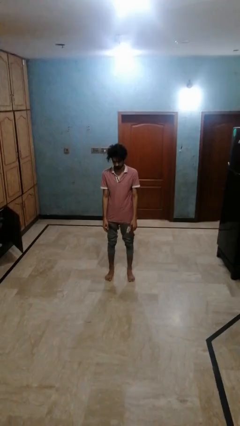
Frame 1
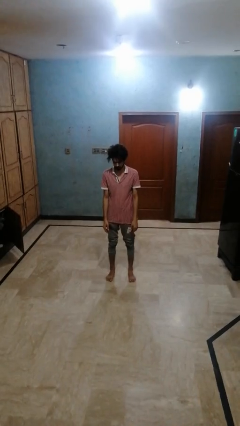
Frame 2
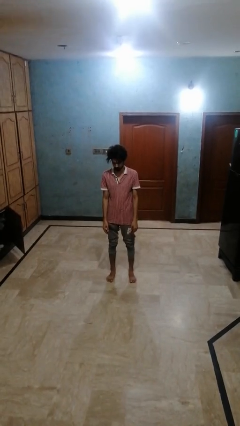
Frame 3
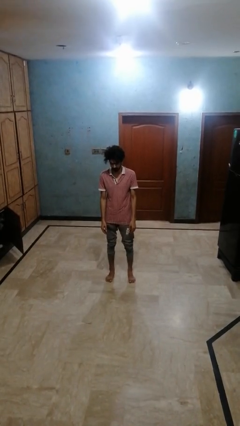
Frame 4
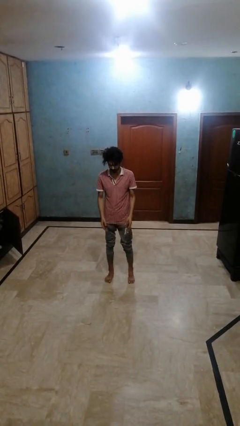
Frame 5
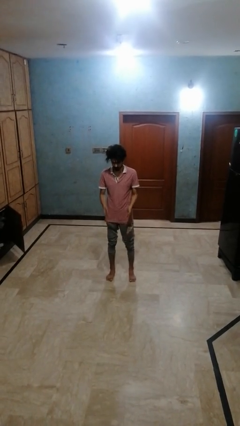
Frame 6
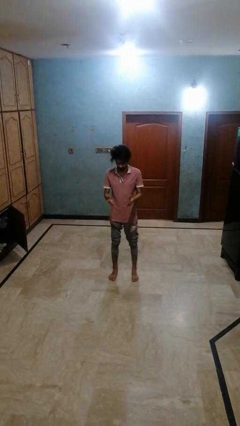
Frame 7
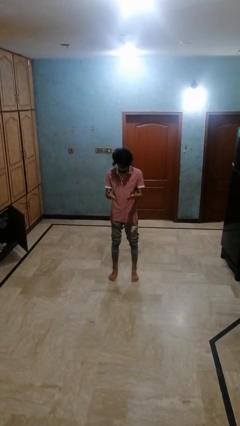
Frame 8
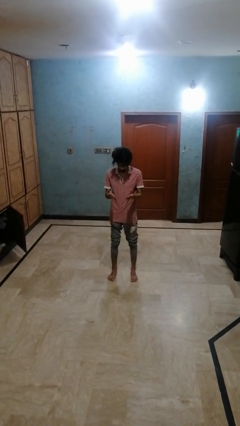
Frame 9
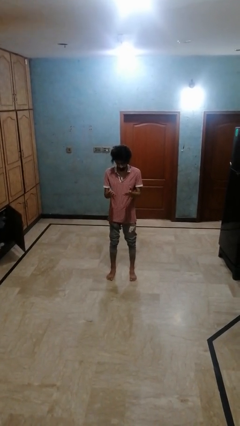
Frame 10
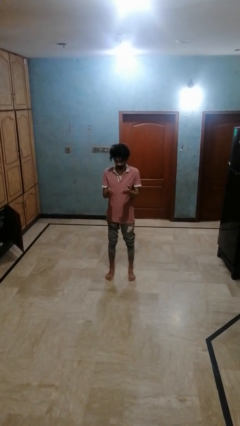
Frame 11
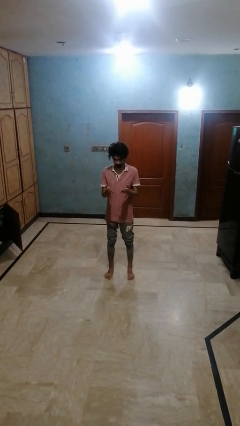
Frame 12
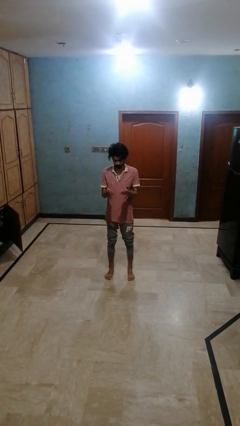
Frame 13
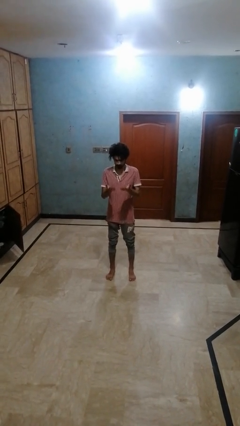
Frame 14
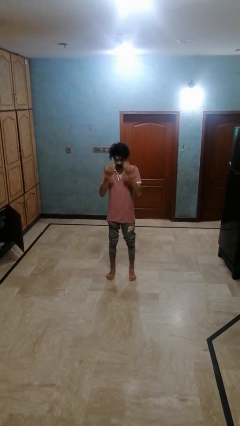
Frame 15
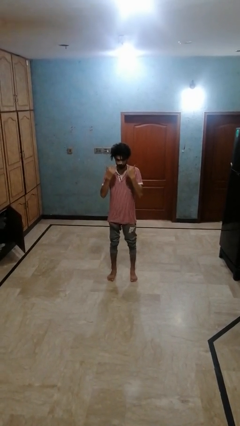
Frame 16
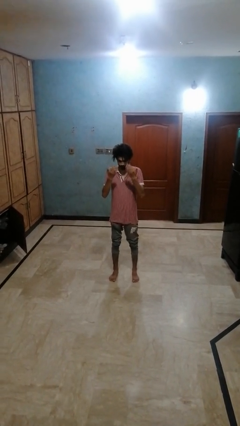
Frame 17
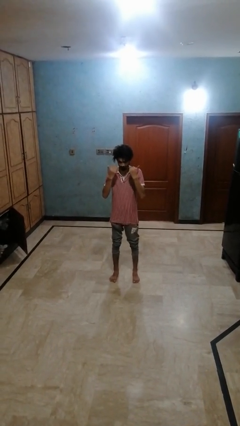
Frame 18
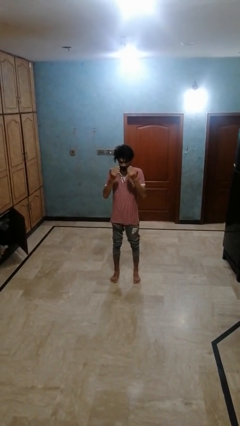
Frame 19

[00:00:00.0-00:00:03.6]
person prays

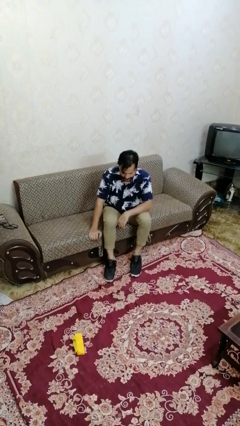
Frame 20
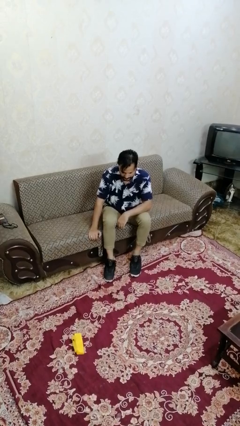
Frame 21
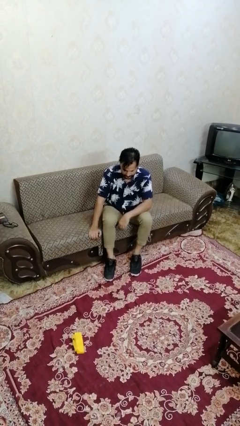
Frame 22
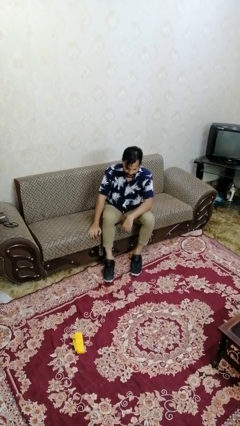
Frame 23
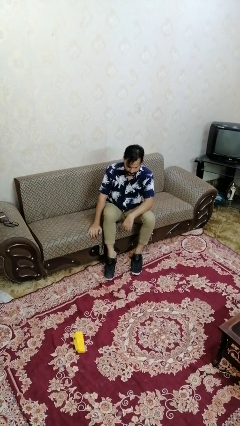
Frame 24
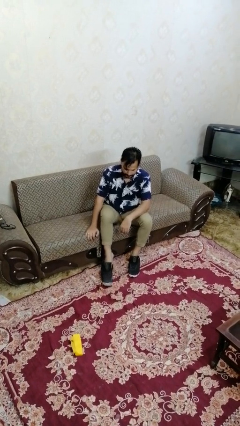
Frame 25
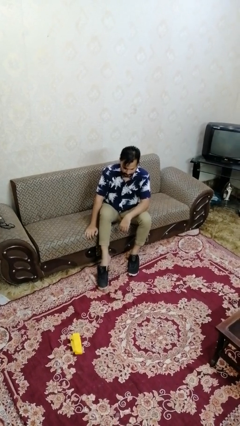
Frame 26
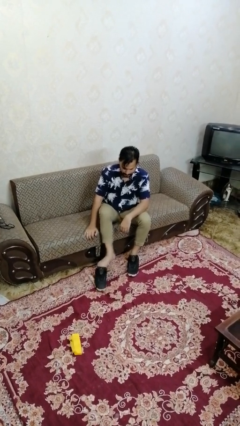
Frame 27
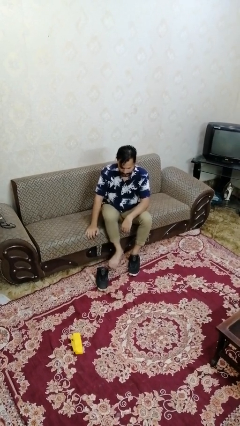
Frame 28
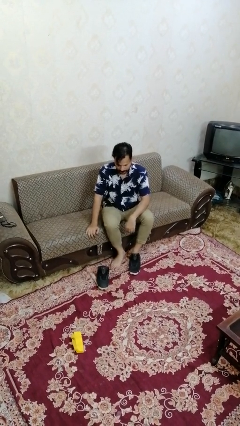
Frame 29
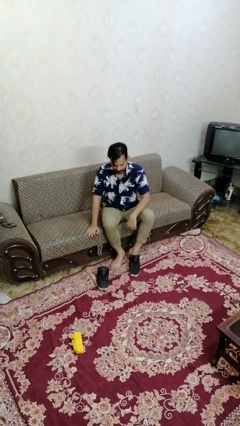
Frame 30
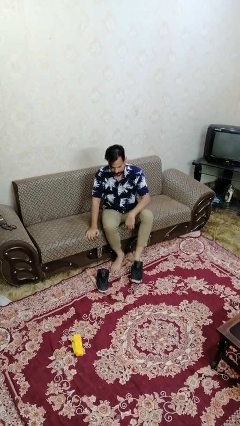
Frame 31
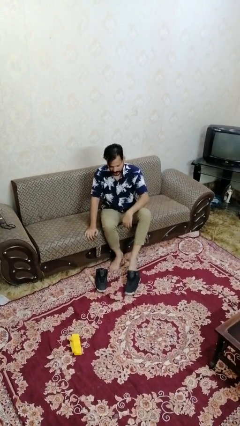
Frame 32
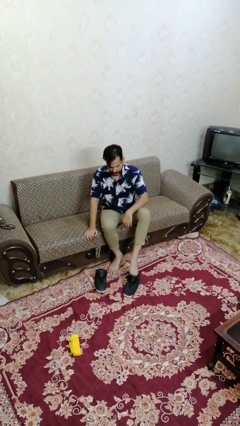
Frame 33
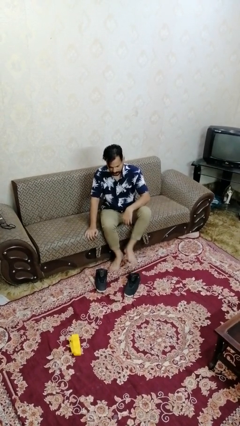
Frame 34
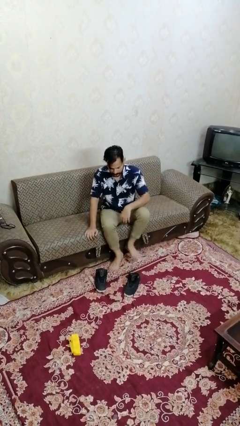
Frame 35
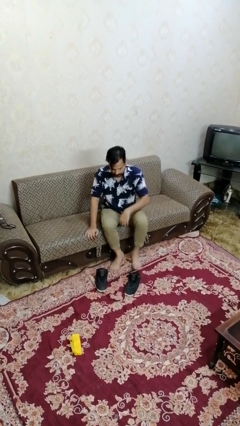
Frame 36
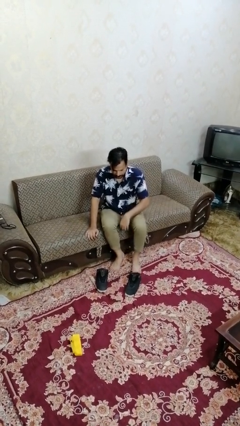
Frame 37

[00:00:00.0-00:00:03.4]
person takes off shoes

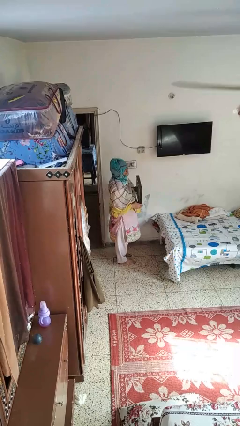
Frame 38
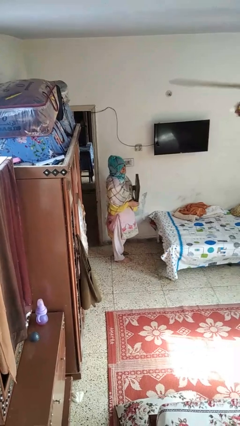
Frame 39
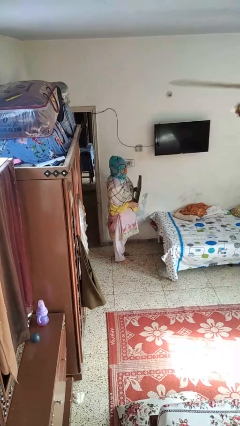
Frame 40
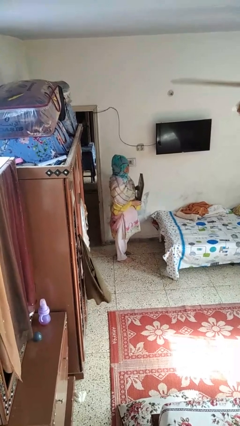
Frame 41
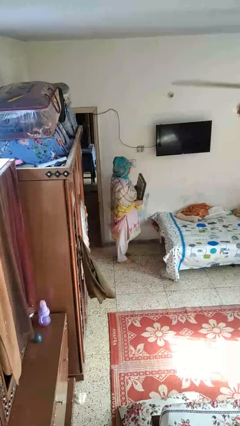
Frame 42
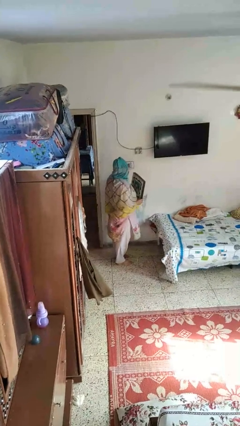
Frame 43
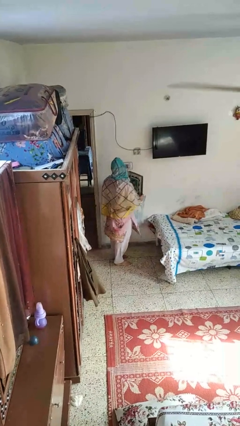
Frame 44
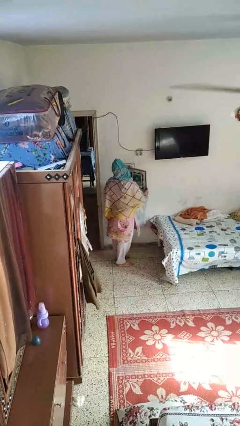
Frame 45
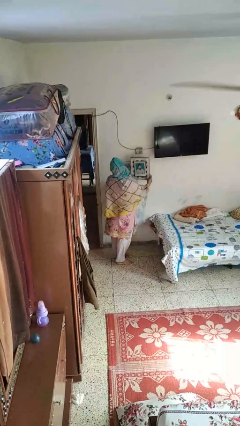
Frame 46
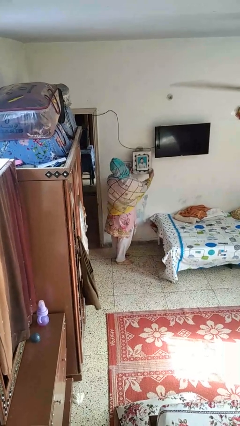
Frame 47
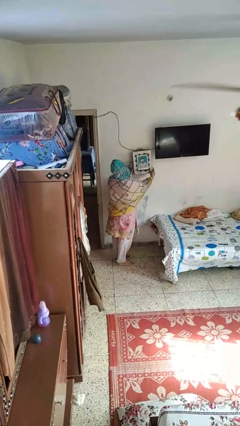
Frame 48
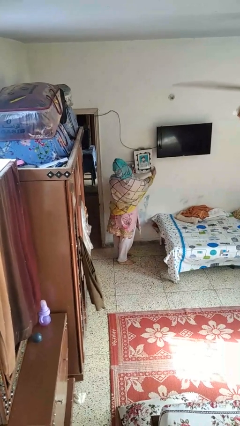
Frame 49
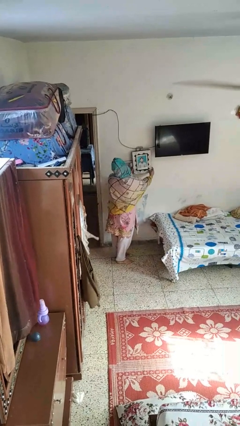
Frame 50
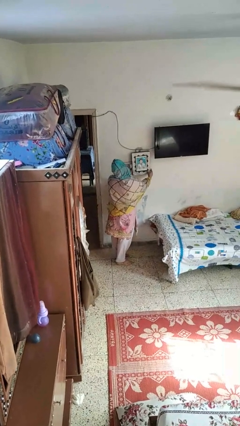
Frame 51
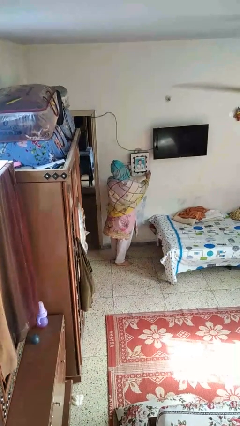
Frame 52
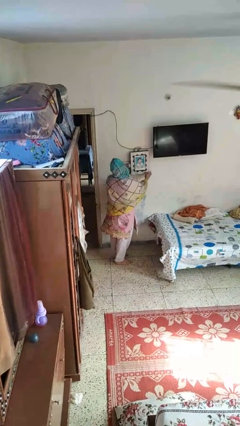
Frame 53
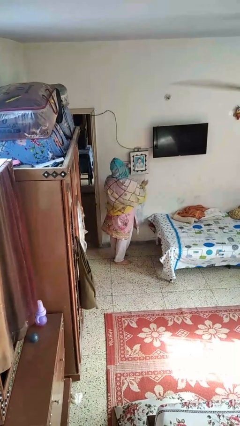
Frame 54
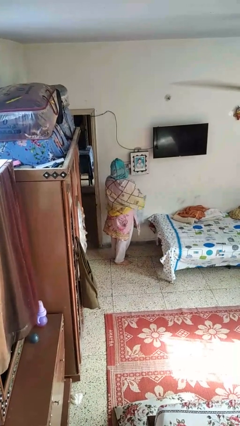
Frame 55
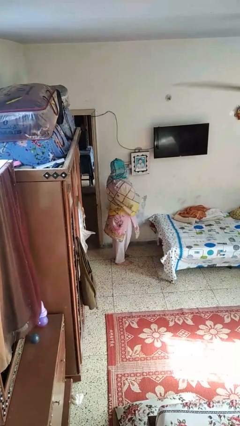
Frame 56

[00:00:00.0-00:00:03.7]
person puts up picture frame

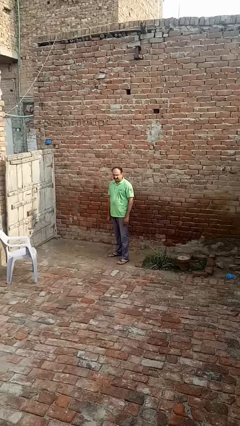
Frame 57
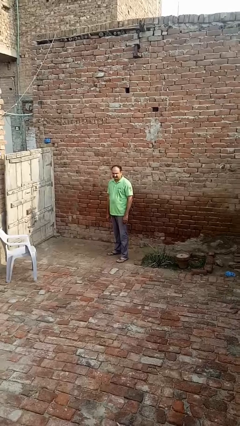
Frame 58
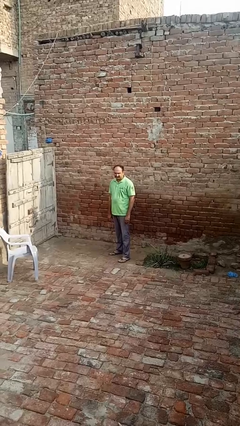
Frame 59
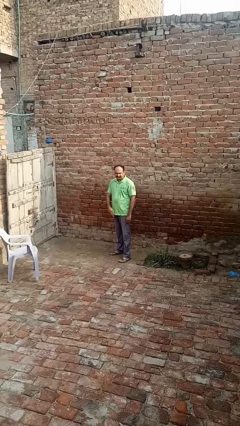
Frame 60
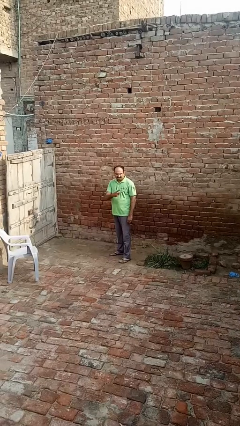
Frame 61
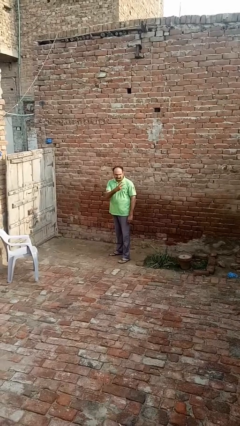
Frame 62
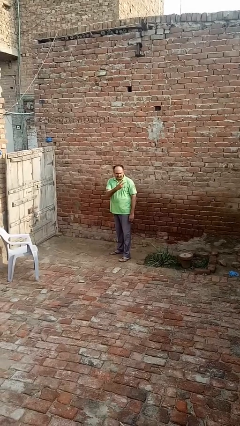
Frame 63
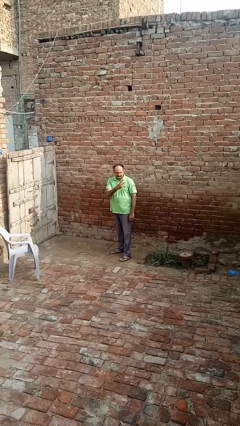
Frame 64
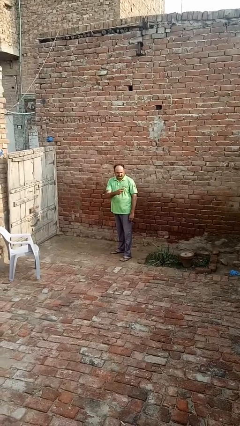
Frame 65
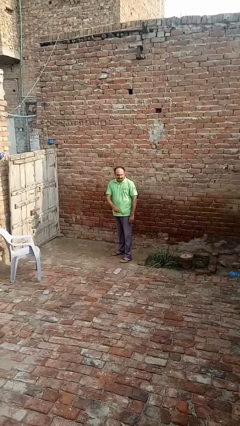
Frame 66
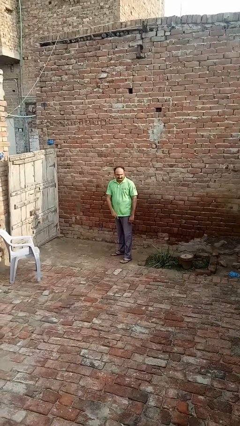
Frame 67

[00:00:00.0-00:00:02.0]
person gestures peace

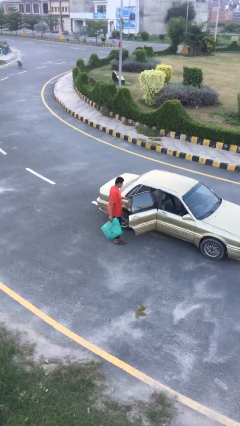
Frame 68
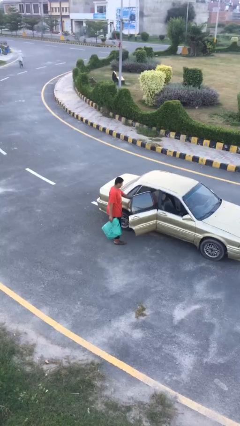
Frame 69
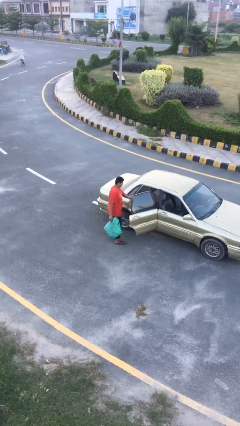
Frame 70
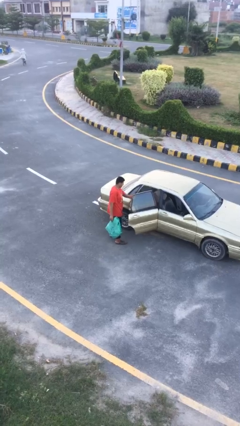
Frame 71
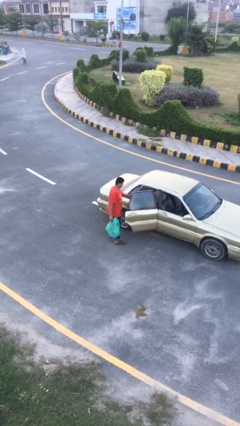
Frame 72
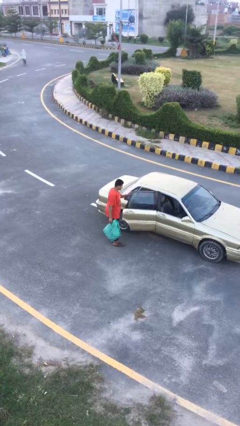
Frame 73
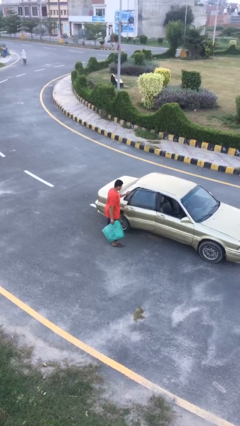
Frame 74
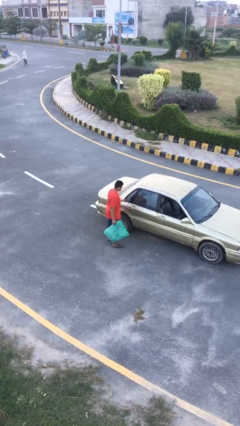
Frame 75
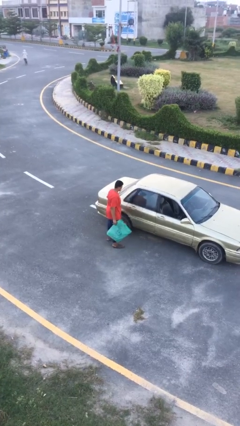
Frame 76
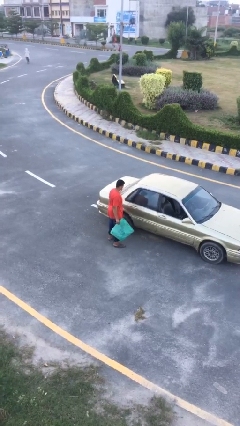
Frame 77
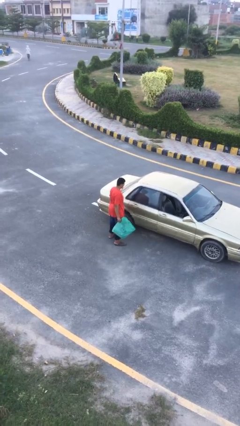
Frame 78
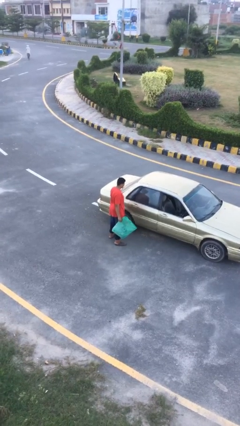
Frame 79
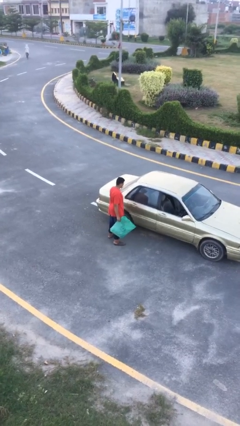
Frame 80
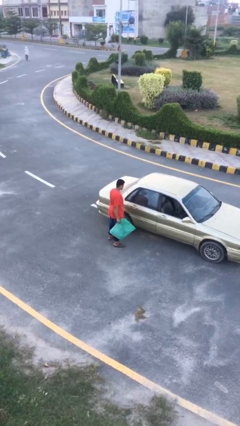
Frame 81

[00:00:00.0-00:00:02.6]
person closes car door

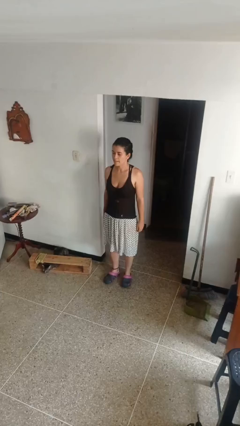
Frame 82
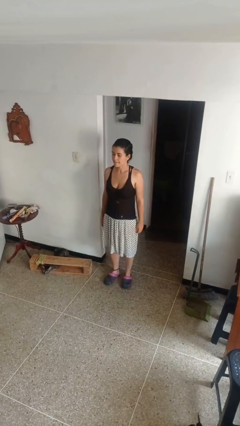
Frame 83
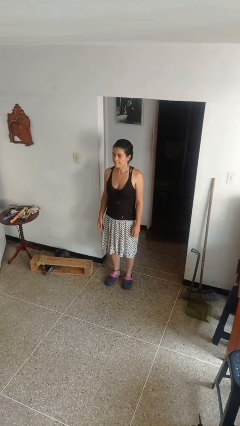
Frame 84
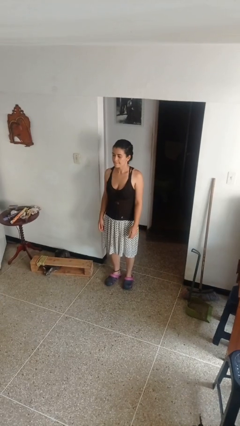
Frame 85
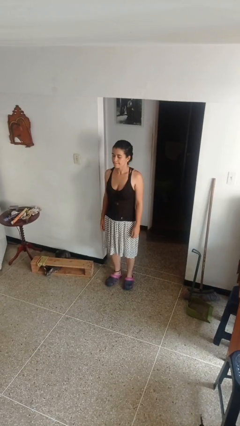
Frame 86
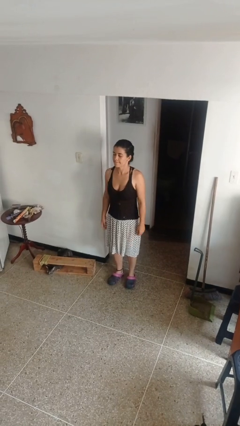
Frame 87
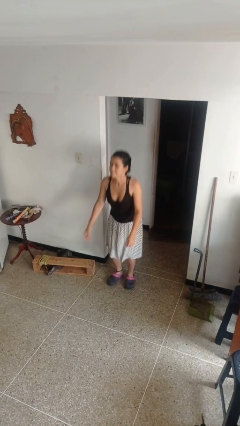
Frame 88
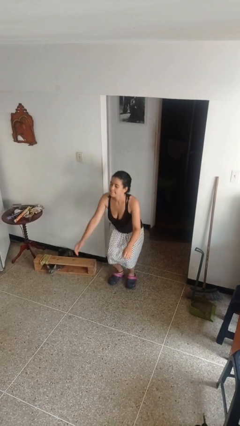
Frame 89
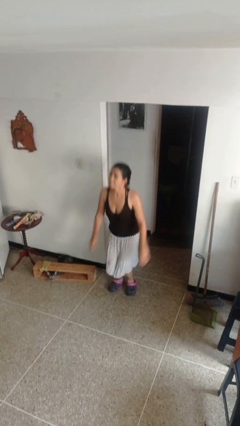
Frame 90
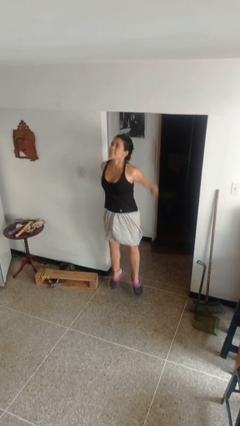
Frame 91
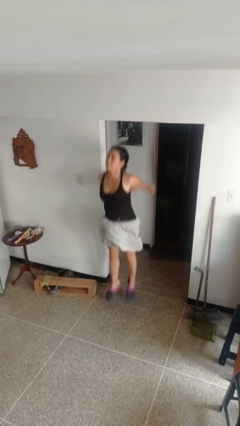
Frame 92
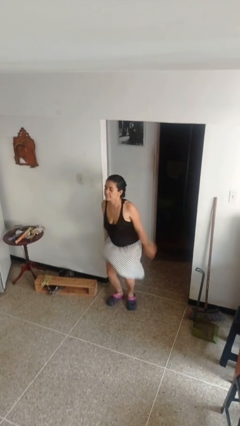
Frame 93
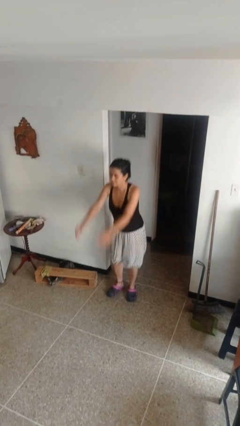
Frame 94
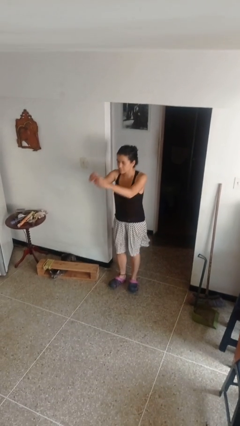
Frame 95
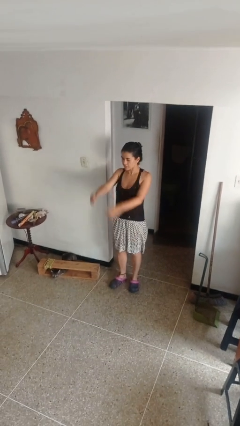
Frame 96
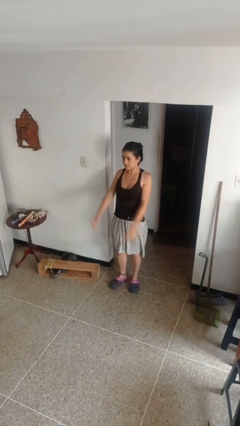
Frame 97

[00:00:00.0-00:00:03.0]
person jumps
